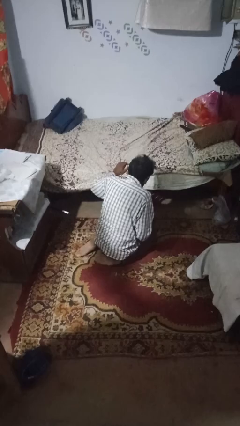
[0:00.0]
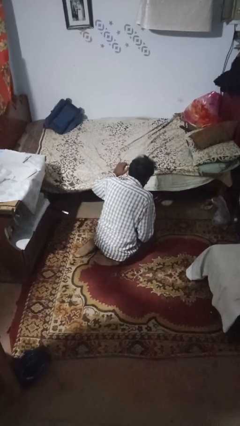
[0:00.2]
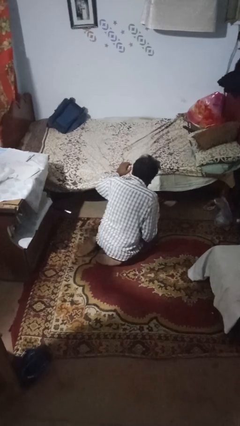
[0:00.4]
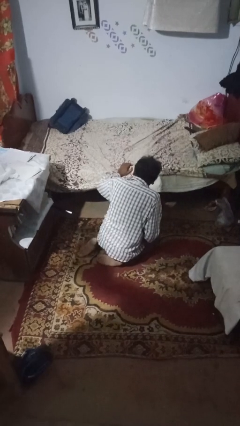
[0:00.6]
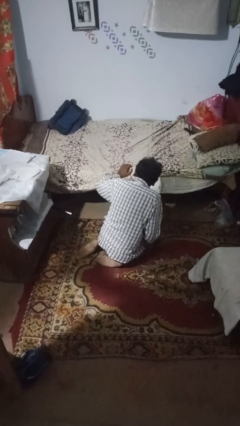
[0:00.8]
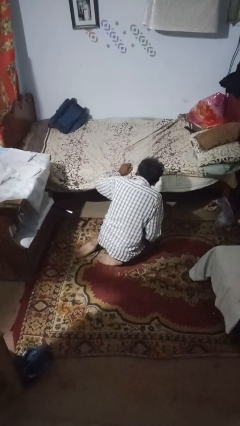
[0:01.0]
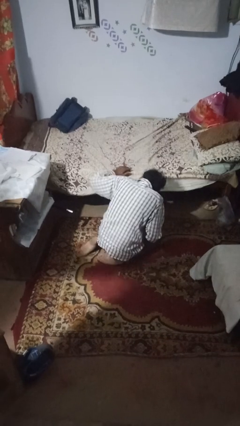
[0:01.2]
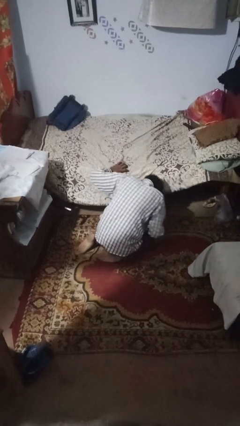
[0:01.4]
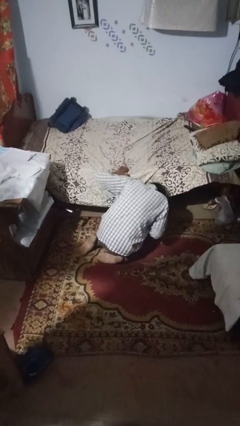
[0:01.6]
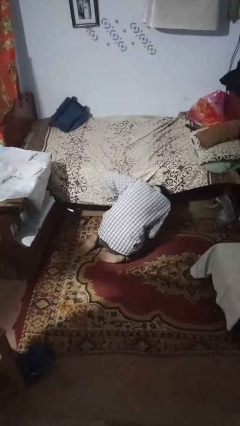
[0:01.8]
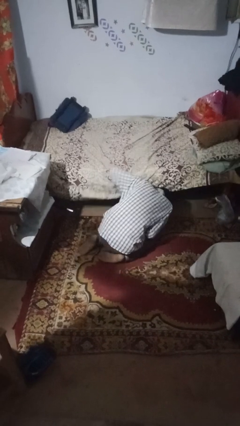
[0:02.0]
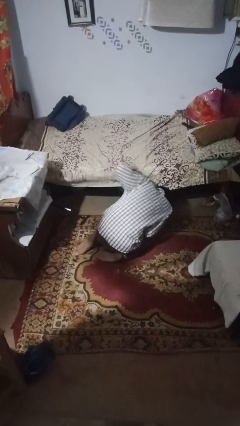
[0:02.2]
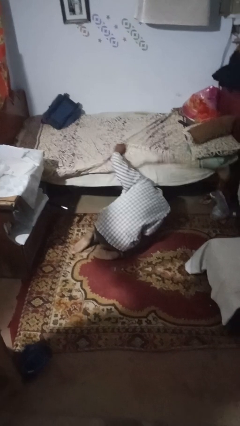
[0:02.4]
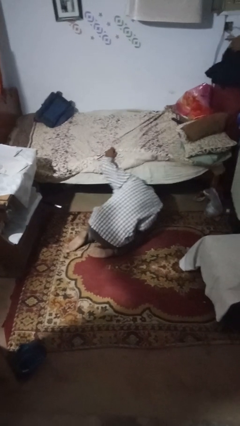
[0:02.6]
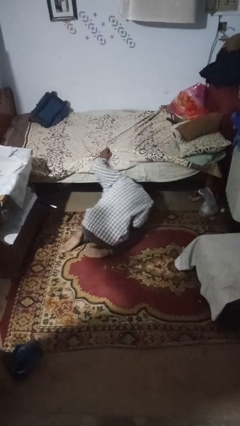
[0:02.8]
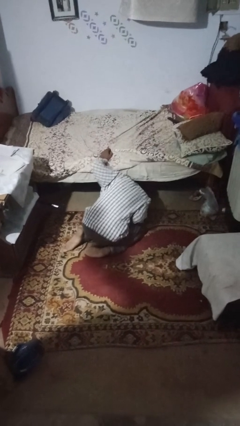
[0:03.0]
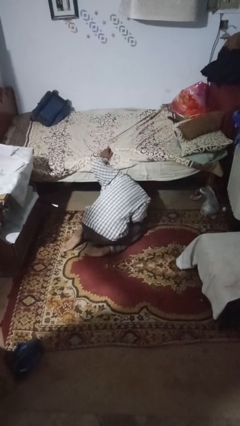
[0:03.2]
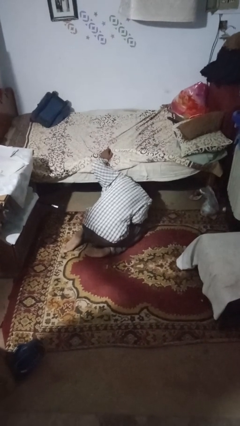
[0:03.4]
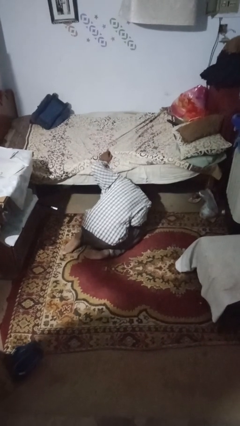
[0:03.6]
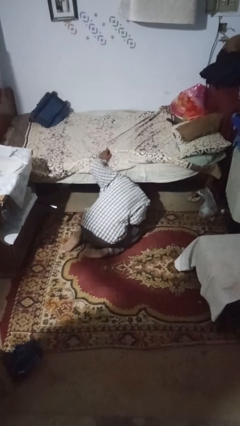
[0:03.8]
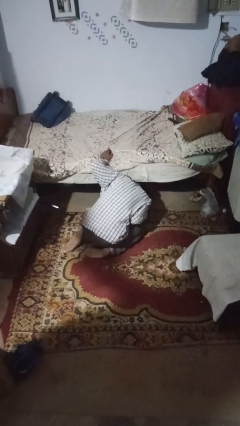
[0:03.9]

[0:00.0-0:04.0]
person searches under bed

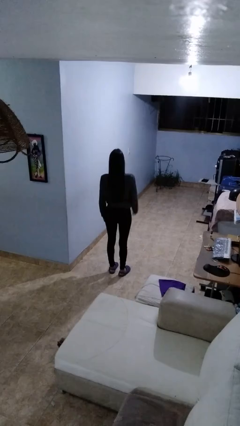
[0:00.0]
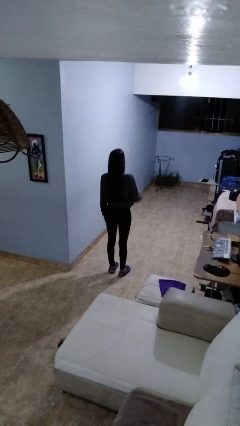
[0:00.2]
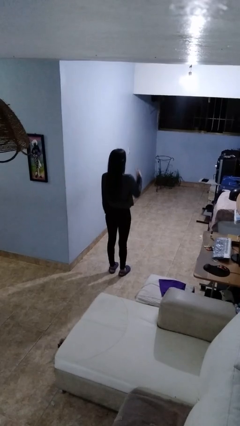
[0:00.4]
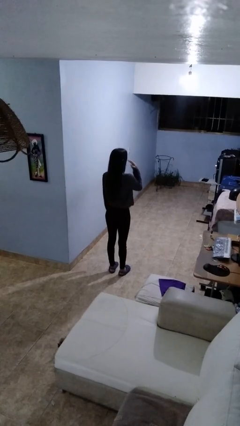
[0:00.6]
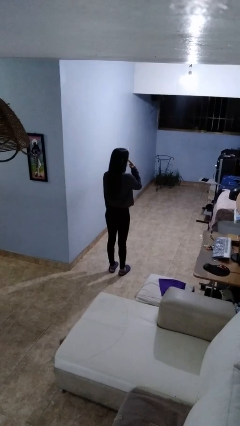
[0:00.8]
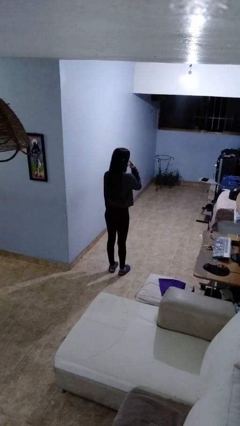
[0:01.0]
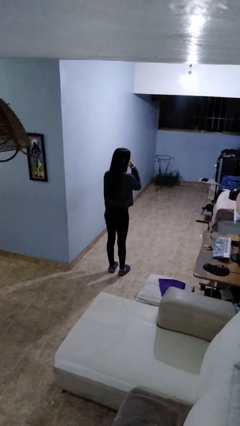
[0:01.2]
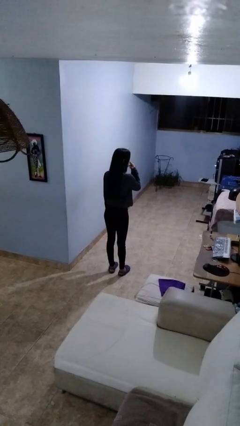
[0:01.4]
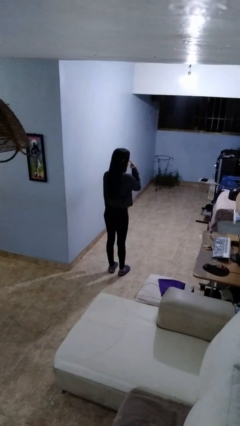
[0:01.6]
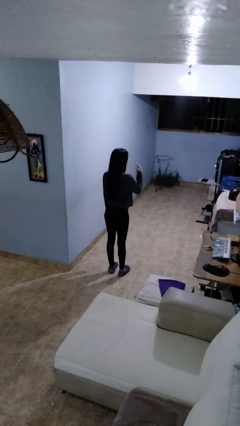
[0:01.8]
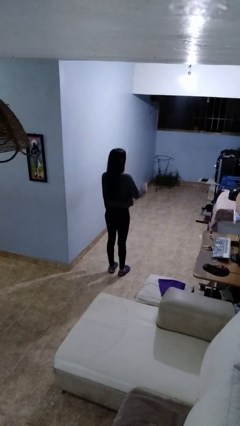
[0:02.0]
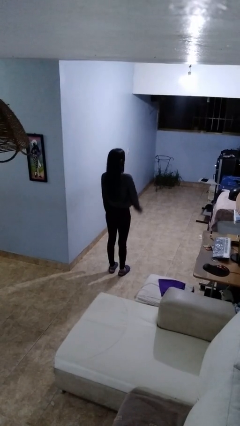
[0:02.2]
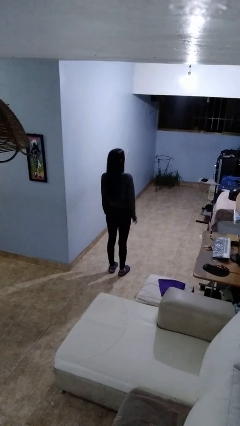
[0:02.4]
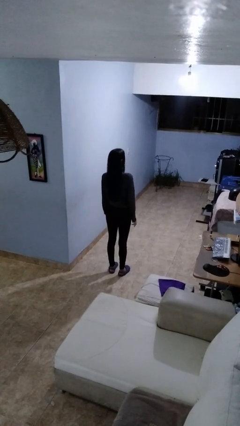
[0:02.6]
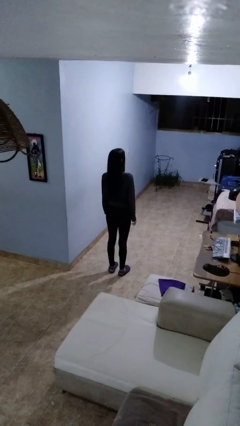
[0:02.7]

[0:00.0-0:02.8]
person gestures watch closely

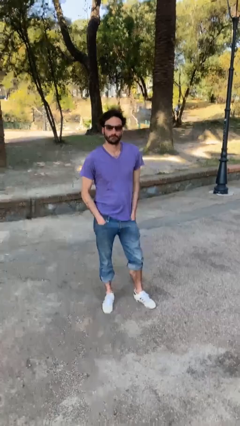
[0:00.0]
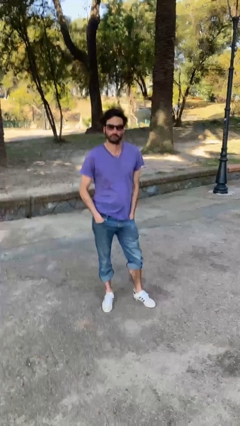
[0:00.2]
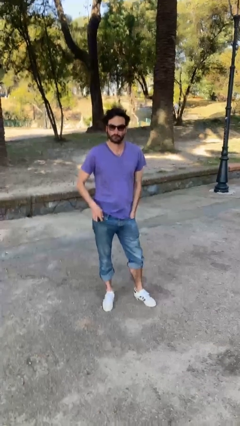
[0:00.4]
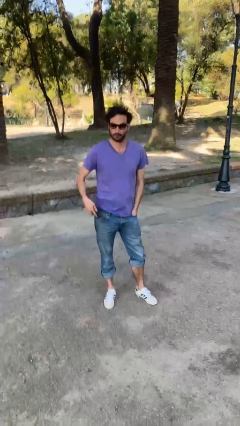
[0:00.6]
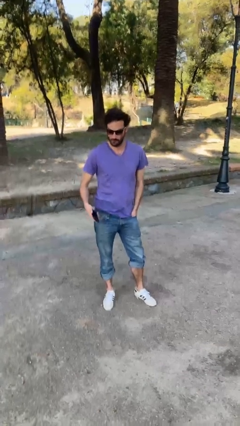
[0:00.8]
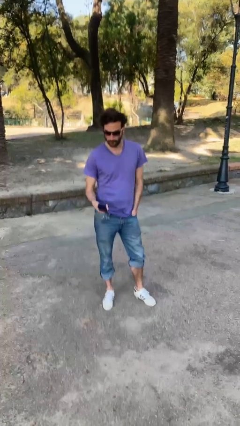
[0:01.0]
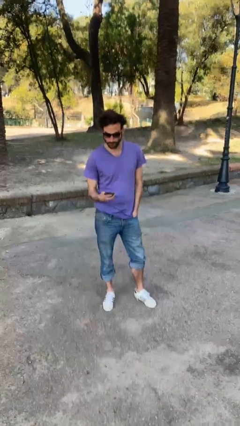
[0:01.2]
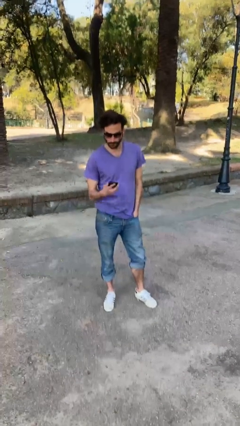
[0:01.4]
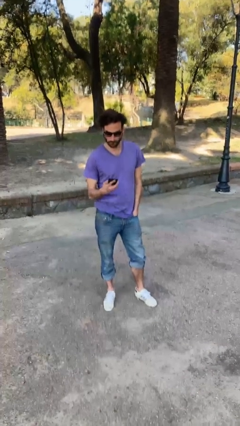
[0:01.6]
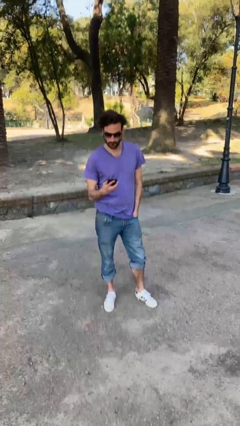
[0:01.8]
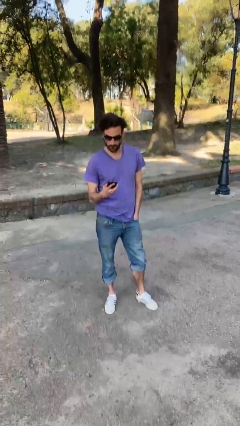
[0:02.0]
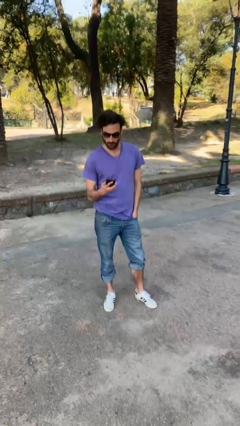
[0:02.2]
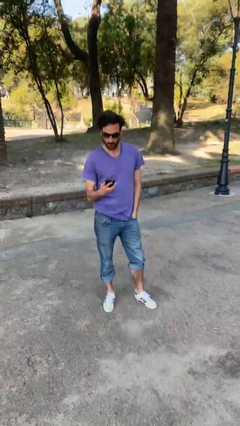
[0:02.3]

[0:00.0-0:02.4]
person takes phone from pocket

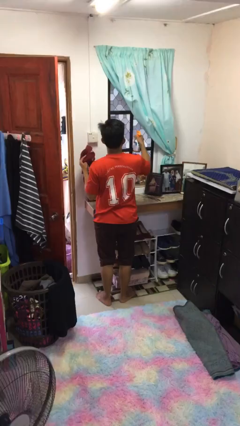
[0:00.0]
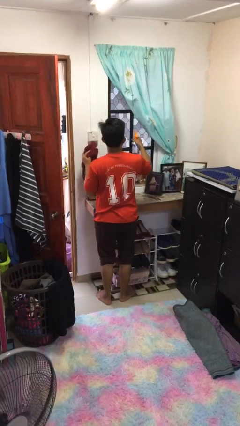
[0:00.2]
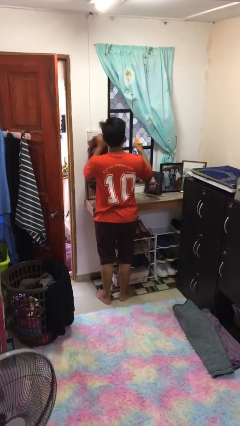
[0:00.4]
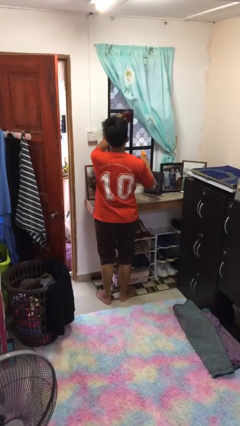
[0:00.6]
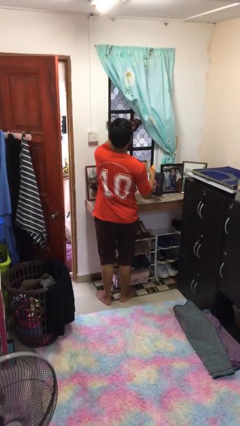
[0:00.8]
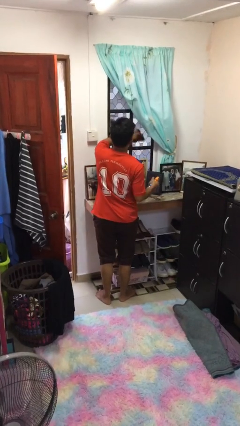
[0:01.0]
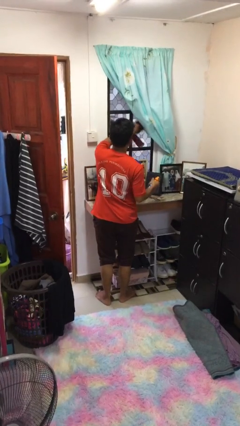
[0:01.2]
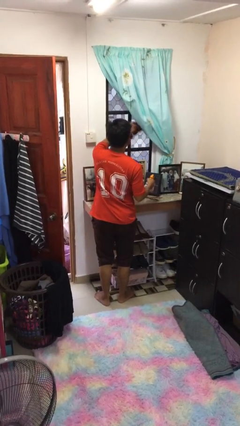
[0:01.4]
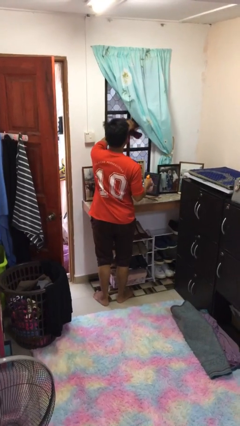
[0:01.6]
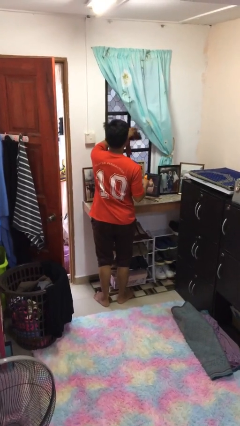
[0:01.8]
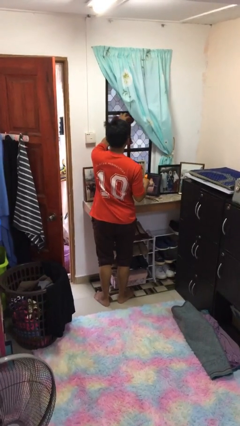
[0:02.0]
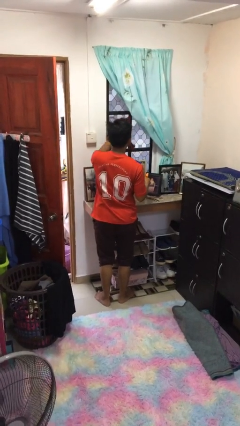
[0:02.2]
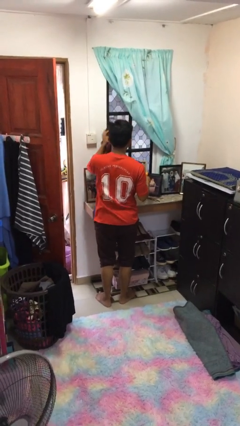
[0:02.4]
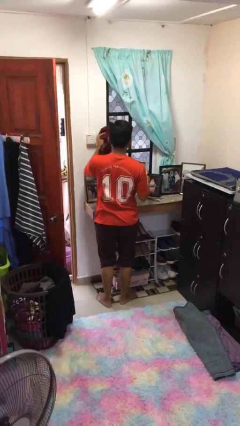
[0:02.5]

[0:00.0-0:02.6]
person washes window

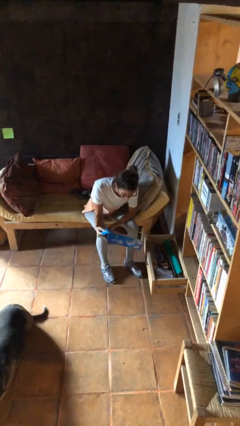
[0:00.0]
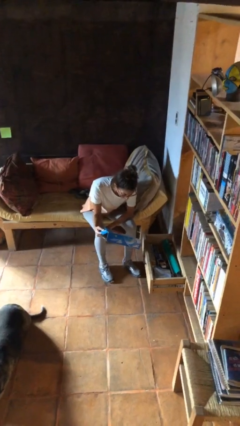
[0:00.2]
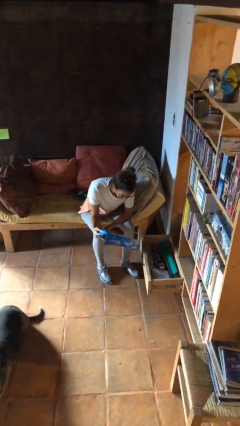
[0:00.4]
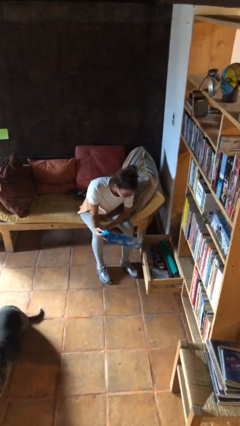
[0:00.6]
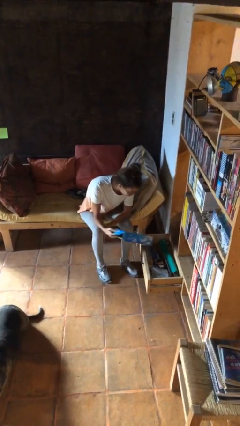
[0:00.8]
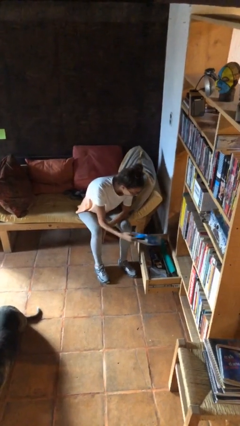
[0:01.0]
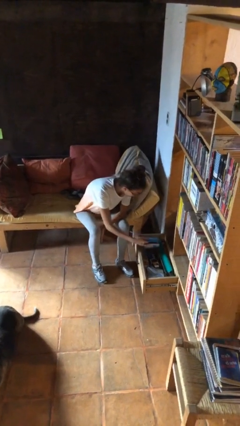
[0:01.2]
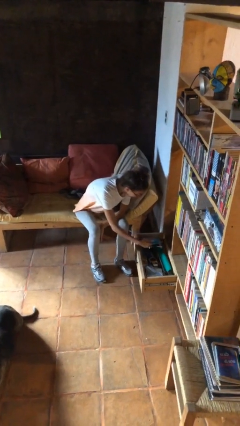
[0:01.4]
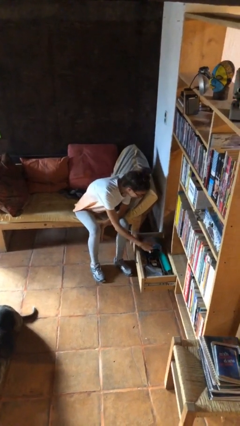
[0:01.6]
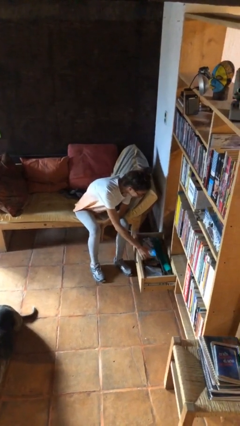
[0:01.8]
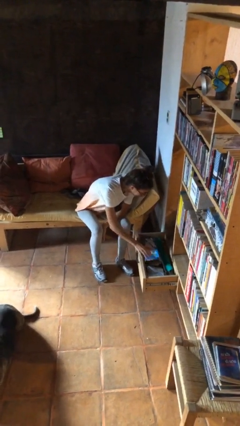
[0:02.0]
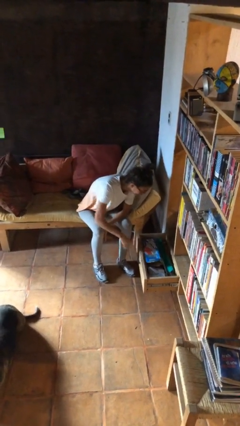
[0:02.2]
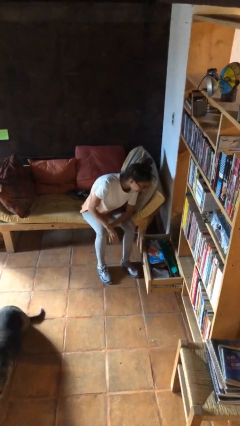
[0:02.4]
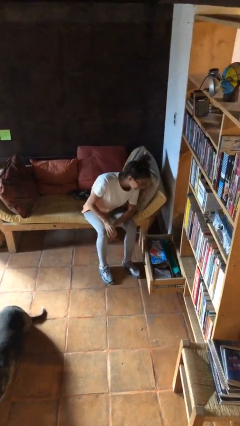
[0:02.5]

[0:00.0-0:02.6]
person puts down object into cabinet

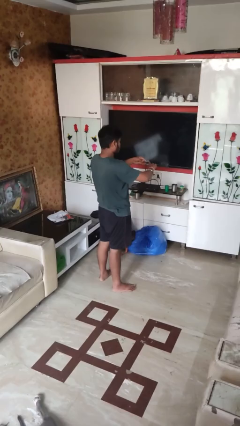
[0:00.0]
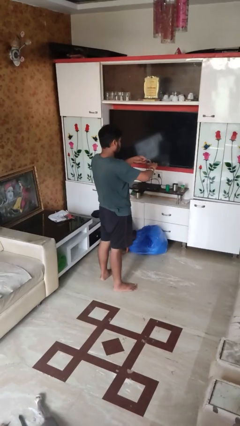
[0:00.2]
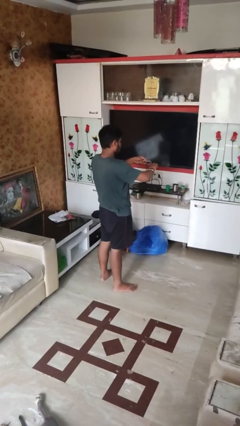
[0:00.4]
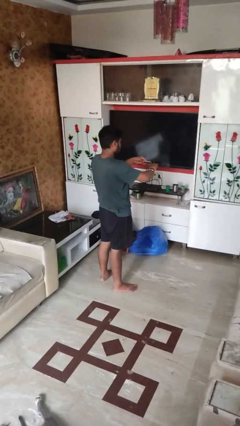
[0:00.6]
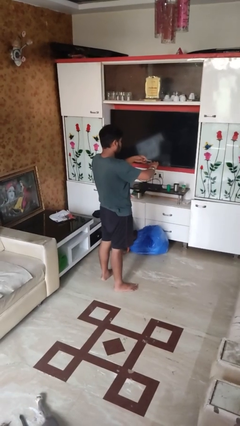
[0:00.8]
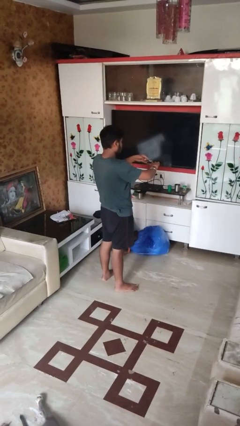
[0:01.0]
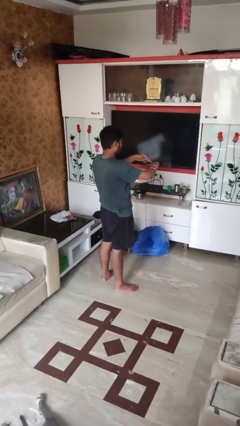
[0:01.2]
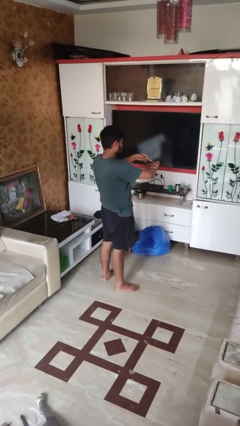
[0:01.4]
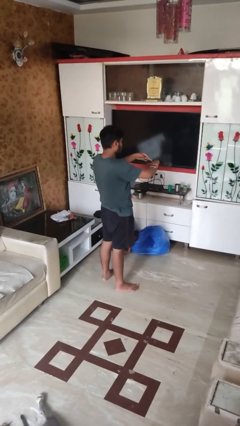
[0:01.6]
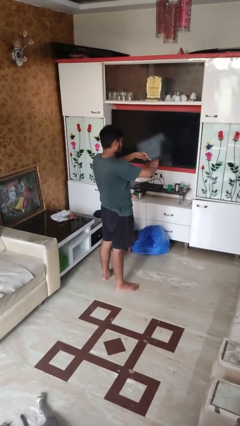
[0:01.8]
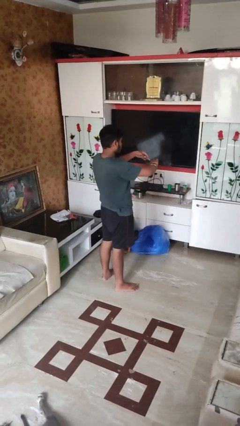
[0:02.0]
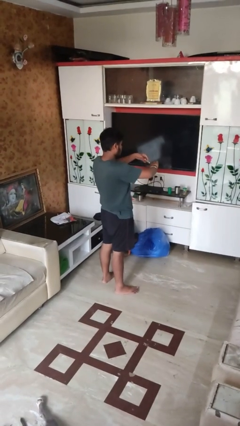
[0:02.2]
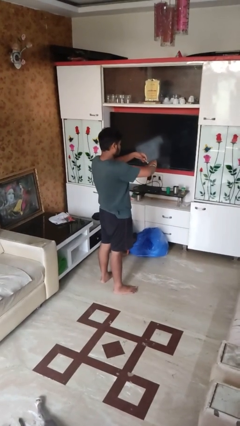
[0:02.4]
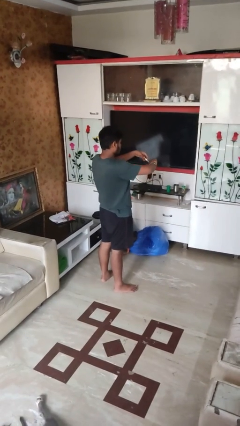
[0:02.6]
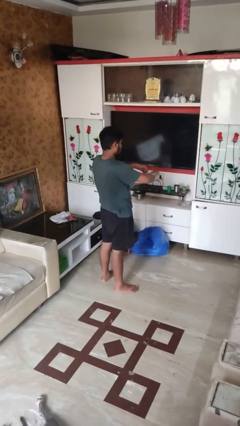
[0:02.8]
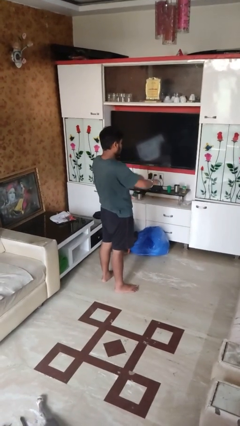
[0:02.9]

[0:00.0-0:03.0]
person clips fingernails
